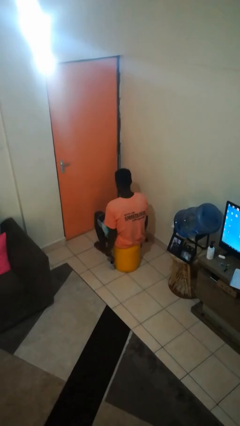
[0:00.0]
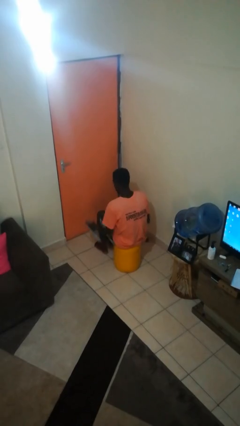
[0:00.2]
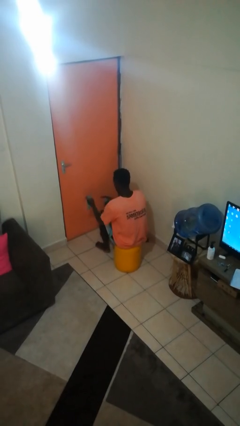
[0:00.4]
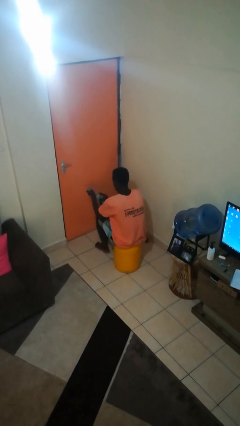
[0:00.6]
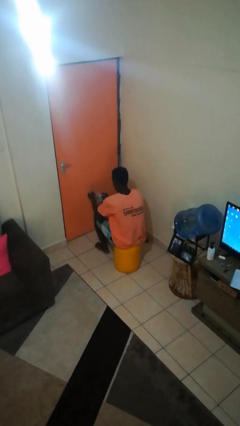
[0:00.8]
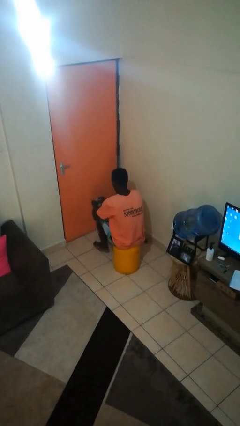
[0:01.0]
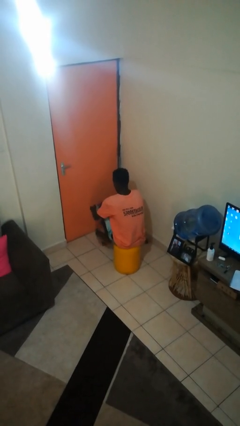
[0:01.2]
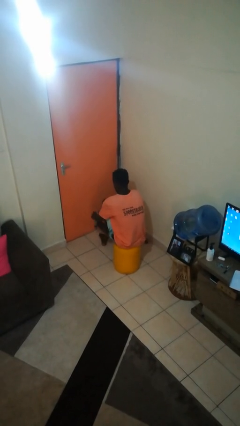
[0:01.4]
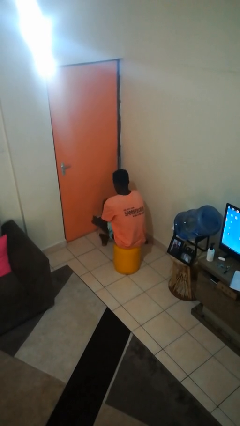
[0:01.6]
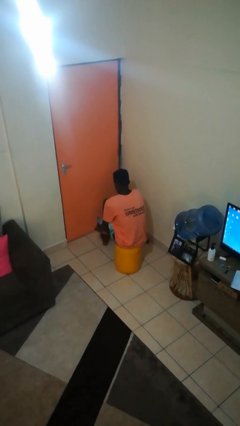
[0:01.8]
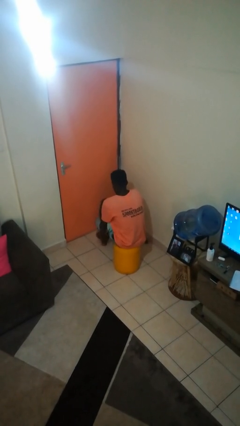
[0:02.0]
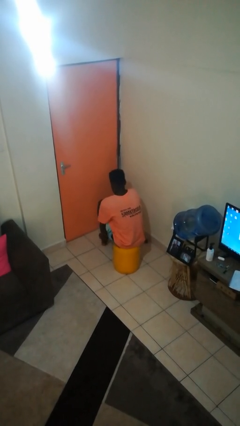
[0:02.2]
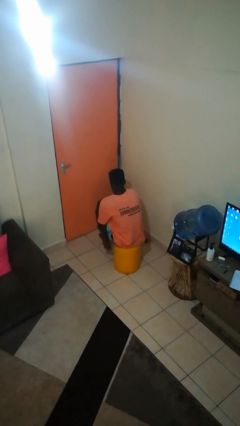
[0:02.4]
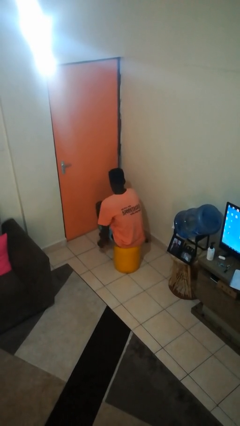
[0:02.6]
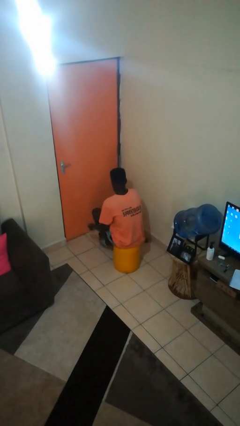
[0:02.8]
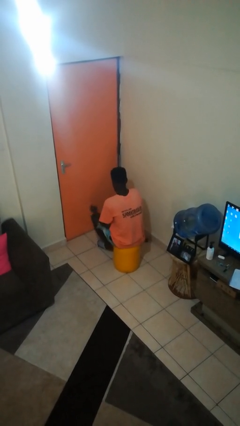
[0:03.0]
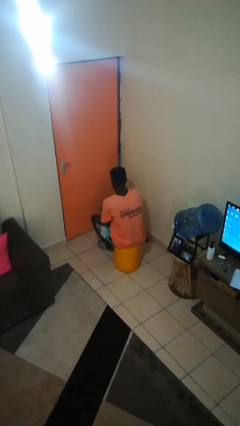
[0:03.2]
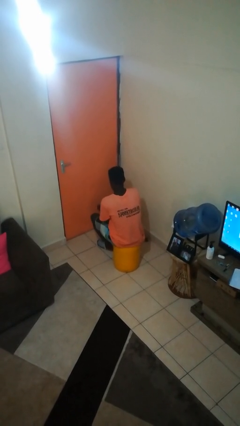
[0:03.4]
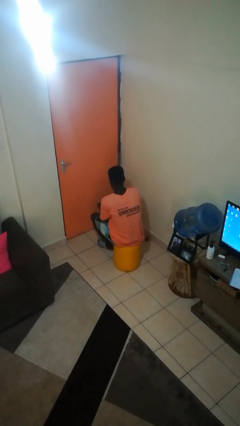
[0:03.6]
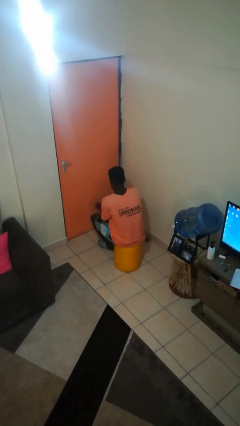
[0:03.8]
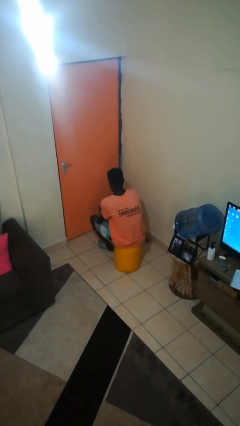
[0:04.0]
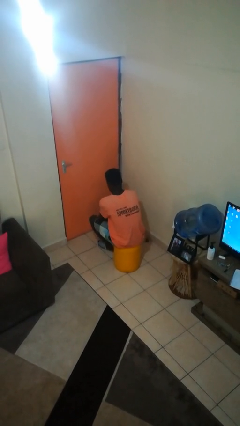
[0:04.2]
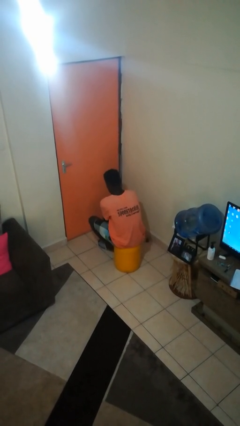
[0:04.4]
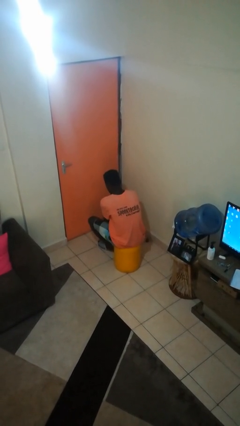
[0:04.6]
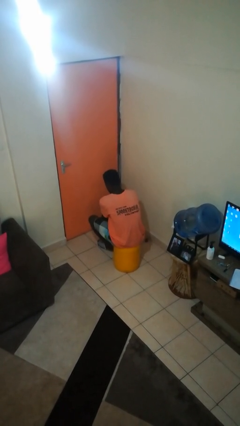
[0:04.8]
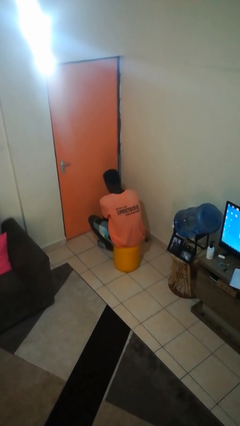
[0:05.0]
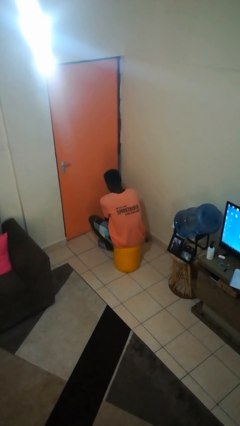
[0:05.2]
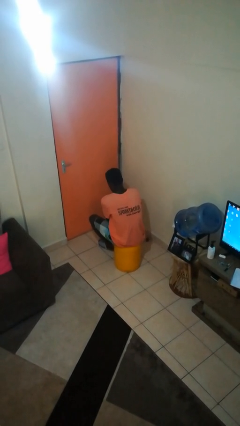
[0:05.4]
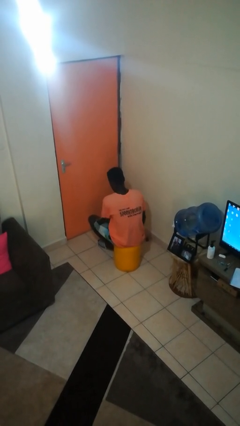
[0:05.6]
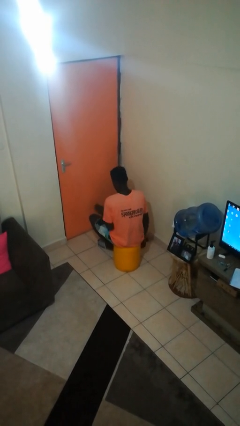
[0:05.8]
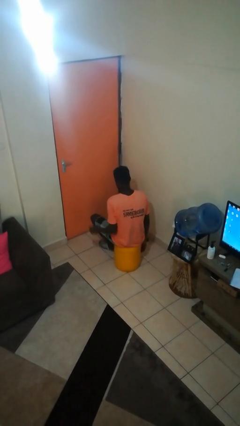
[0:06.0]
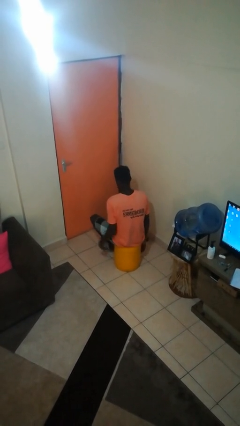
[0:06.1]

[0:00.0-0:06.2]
person puts on socks

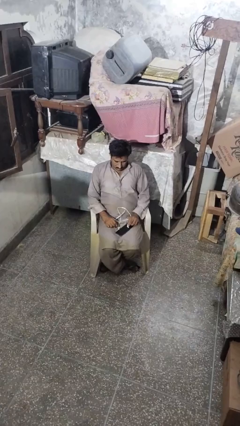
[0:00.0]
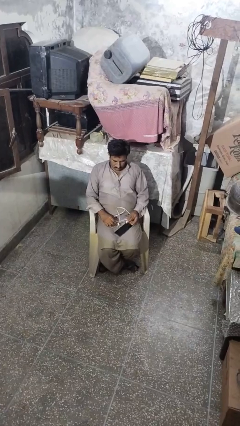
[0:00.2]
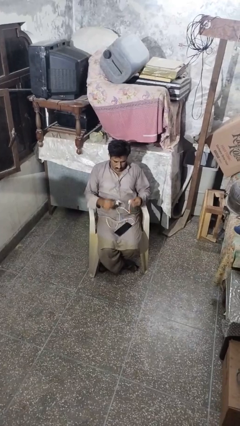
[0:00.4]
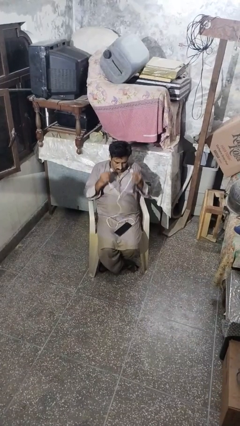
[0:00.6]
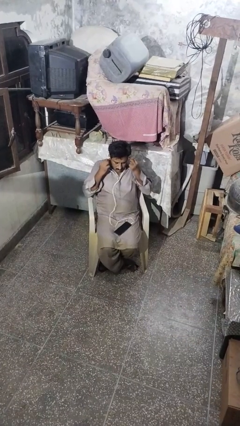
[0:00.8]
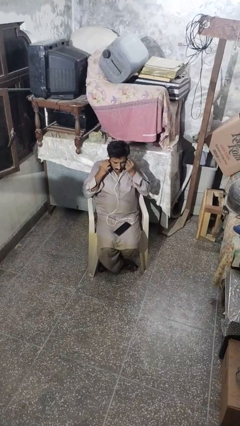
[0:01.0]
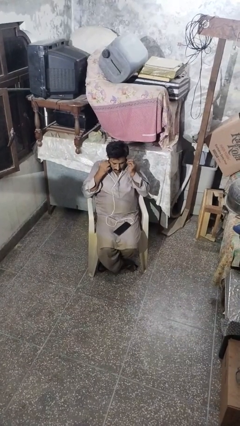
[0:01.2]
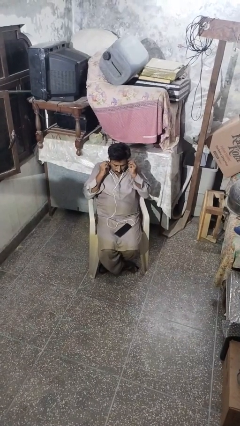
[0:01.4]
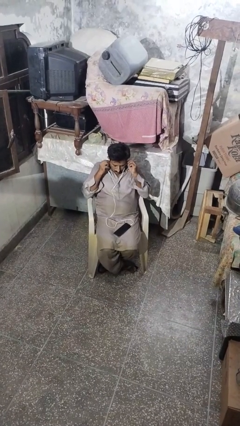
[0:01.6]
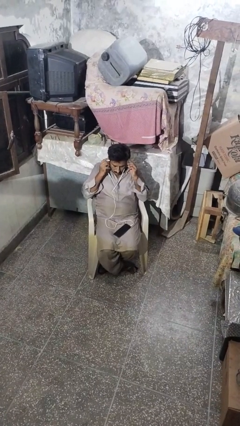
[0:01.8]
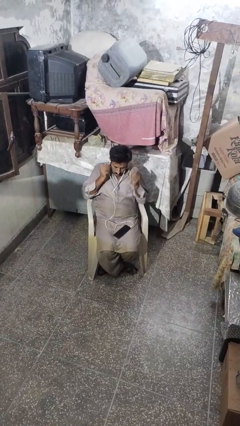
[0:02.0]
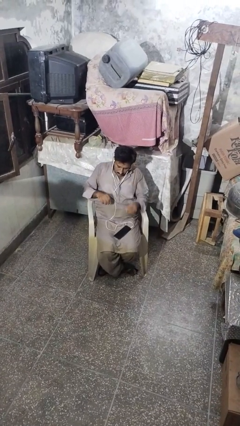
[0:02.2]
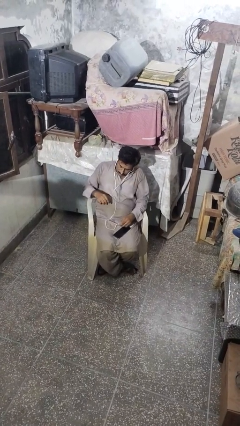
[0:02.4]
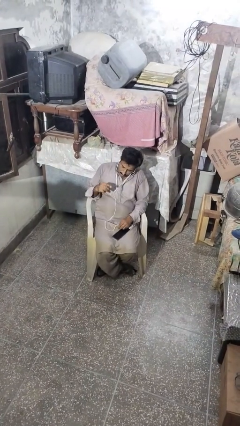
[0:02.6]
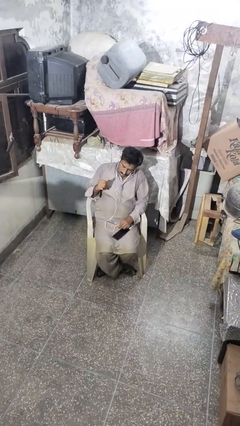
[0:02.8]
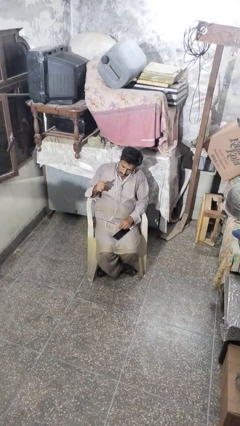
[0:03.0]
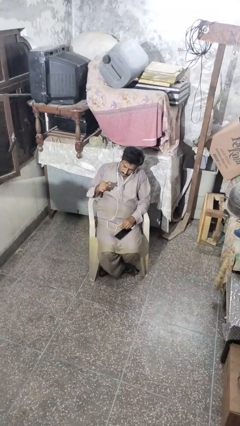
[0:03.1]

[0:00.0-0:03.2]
person puts on headphones

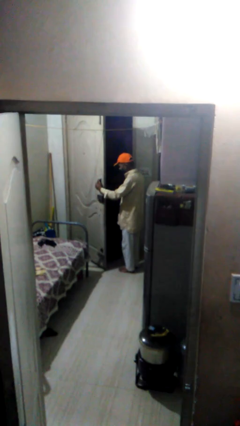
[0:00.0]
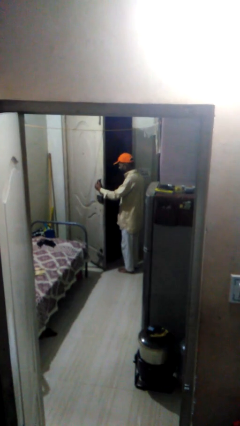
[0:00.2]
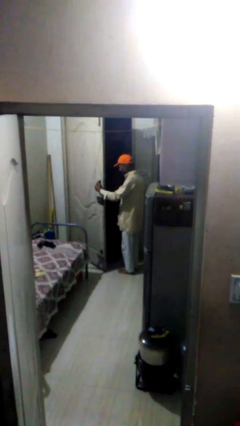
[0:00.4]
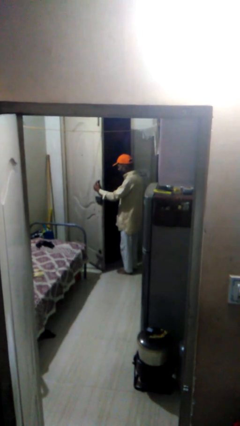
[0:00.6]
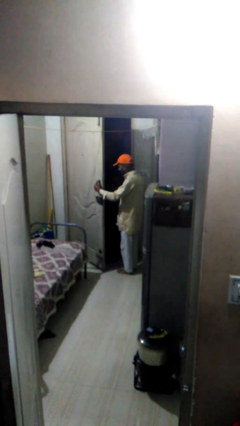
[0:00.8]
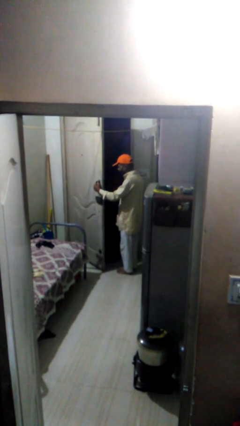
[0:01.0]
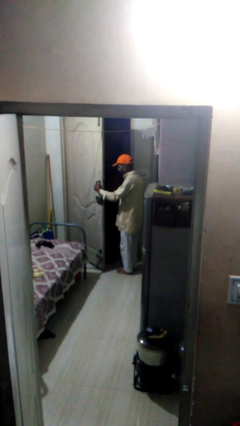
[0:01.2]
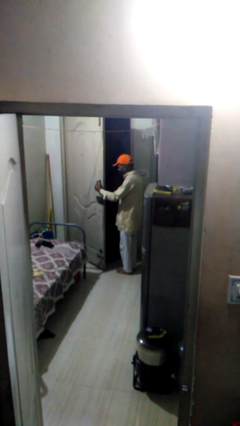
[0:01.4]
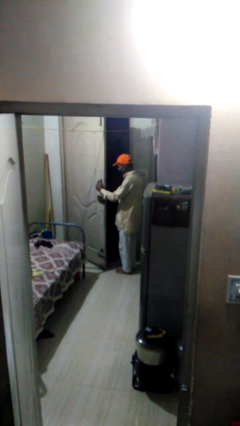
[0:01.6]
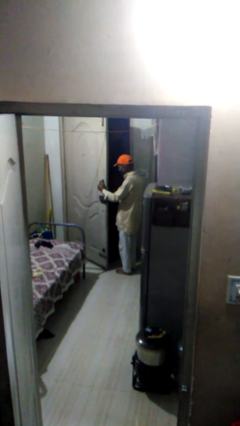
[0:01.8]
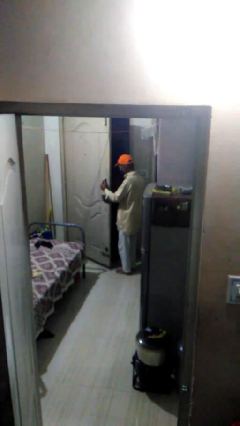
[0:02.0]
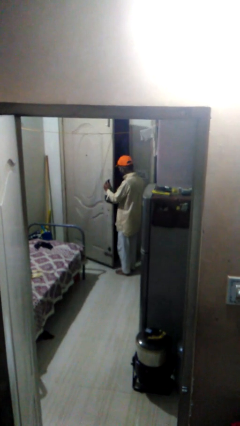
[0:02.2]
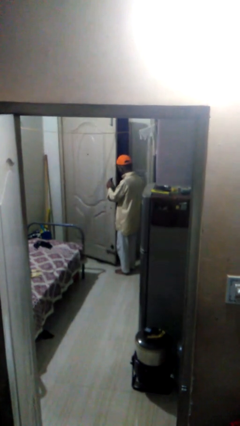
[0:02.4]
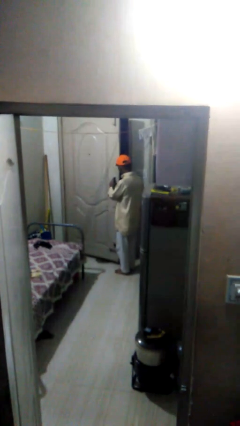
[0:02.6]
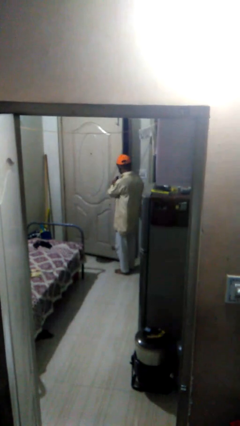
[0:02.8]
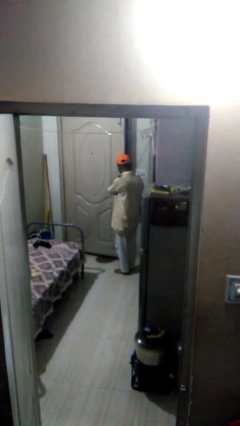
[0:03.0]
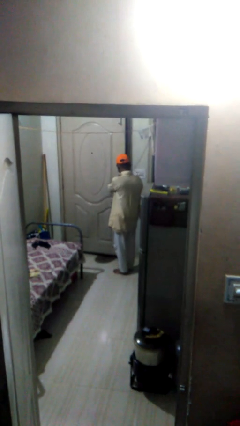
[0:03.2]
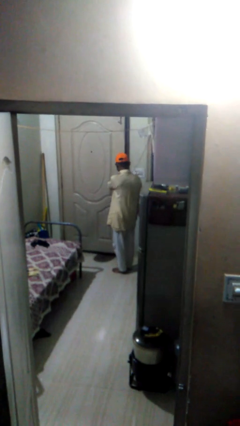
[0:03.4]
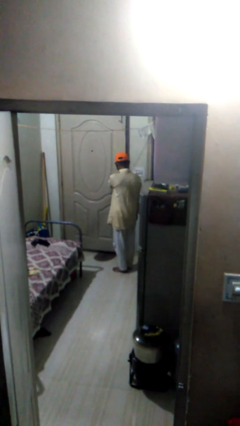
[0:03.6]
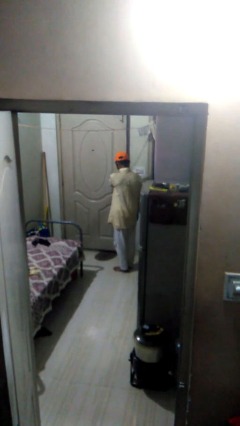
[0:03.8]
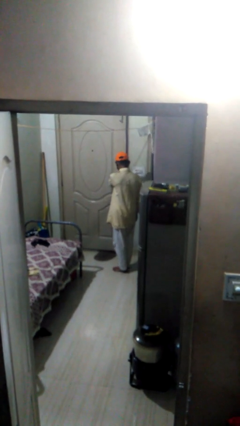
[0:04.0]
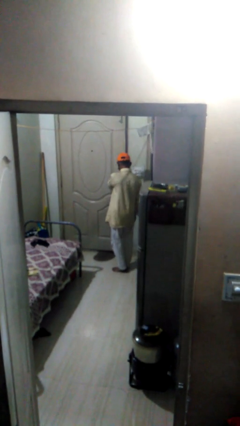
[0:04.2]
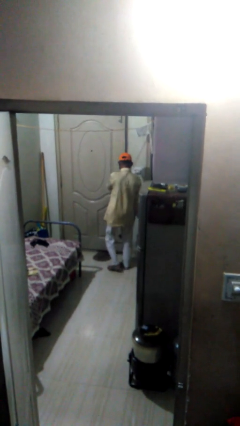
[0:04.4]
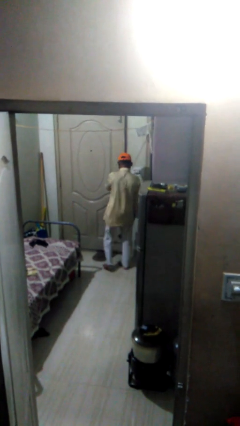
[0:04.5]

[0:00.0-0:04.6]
person closes facility door

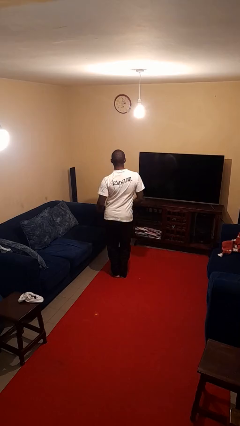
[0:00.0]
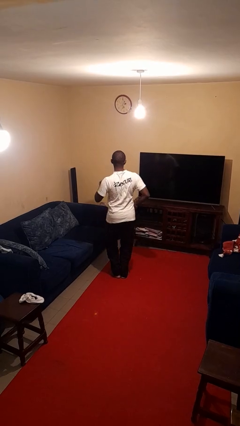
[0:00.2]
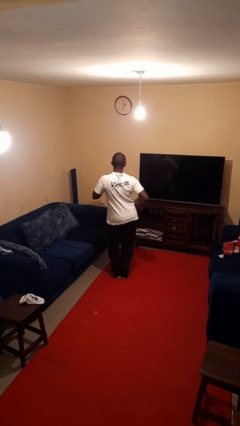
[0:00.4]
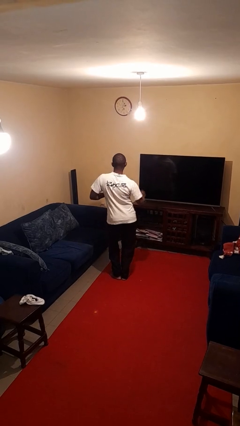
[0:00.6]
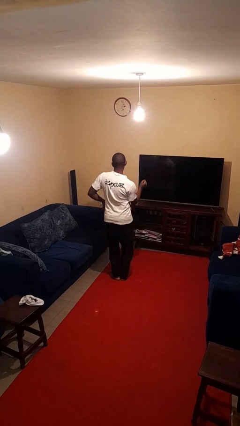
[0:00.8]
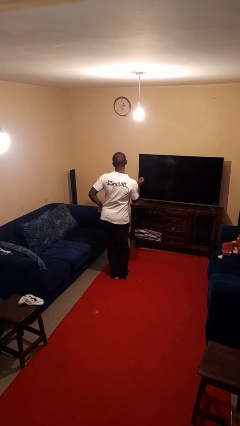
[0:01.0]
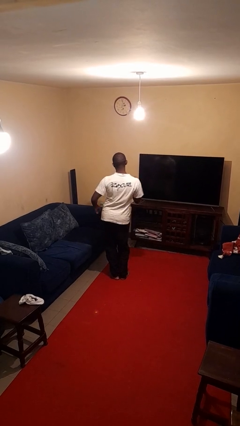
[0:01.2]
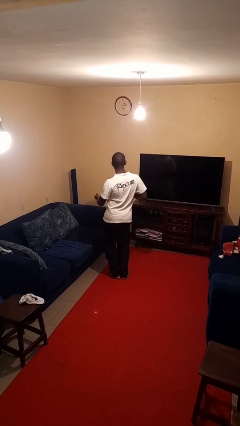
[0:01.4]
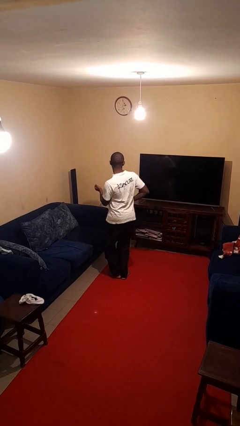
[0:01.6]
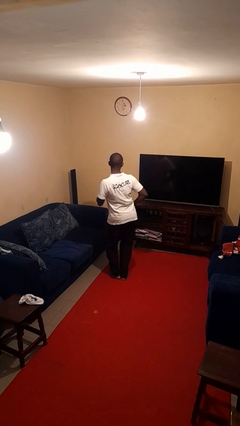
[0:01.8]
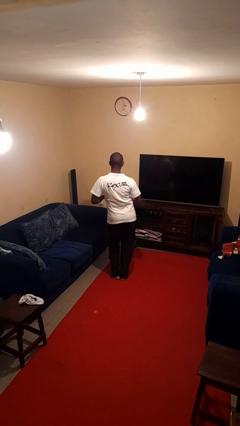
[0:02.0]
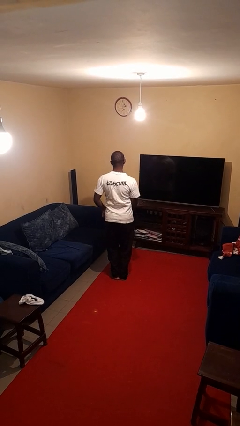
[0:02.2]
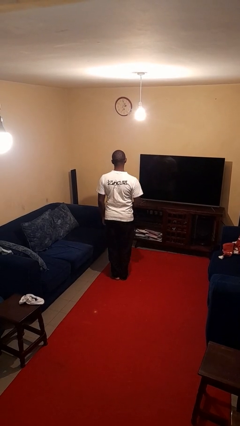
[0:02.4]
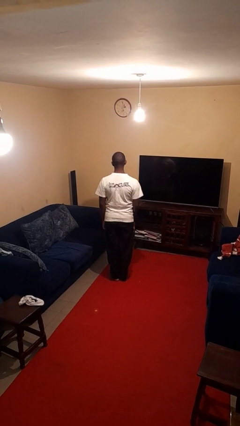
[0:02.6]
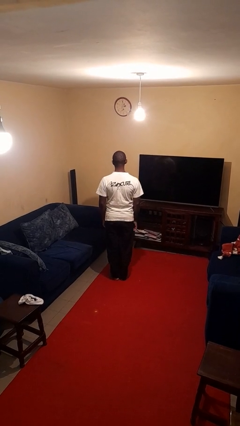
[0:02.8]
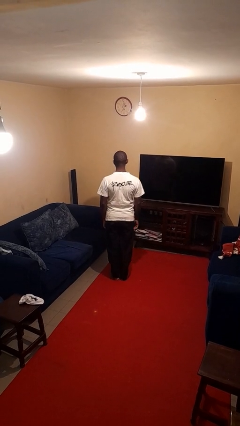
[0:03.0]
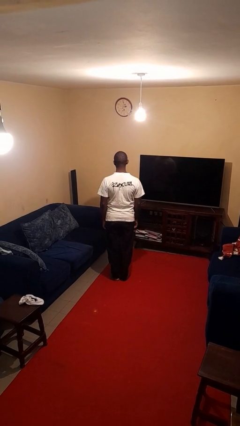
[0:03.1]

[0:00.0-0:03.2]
person dances in place

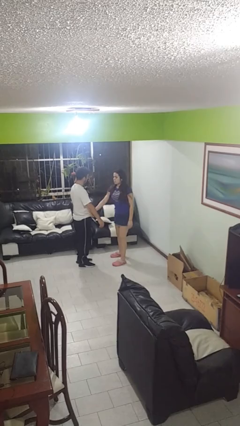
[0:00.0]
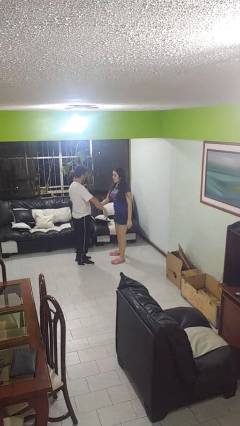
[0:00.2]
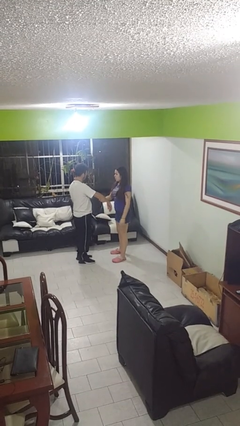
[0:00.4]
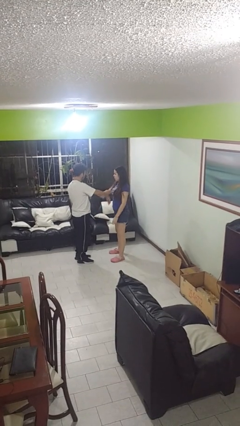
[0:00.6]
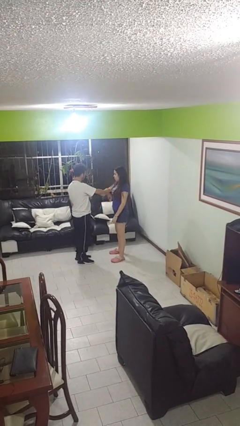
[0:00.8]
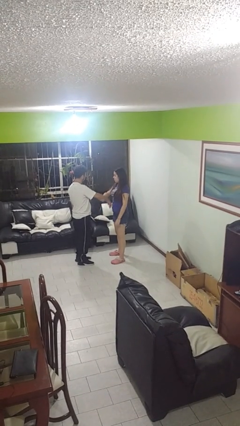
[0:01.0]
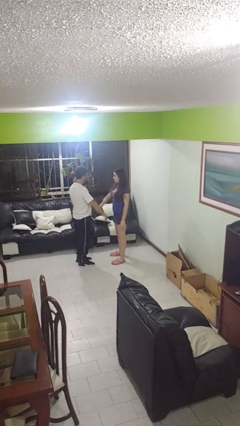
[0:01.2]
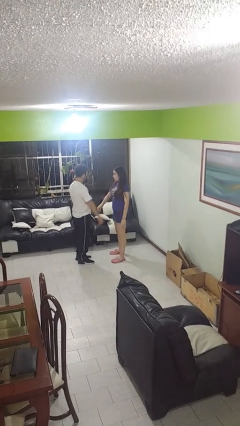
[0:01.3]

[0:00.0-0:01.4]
person grabs person by forearm
